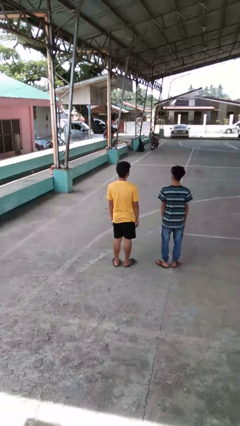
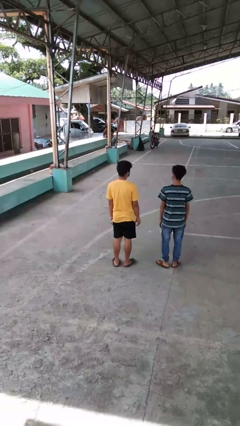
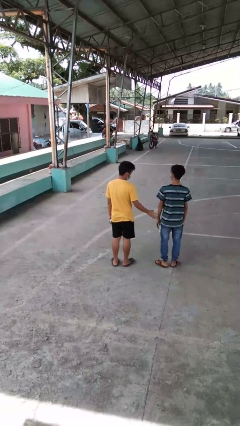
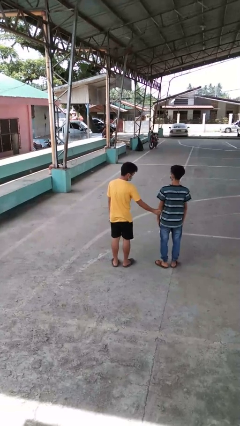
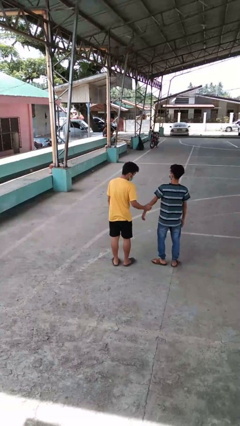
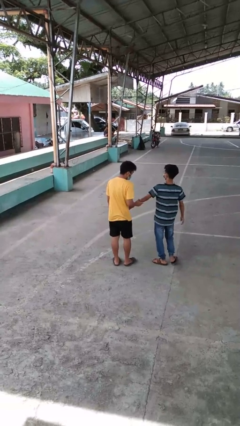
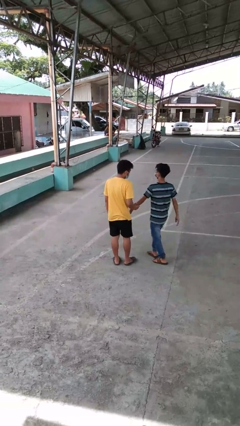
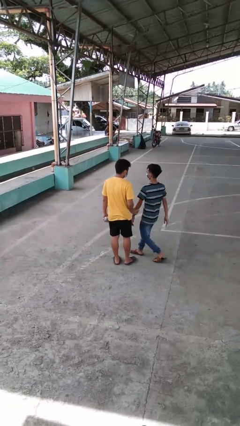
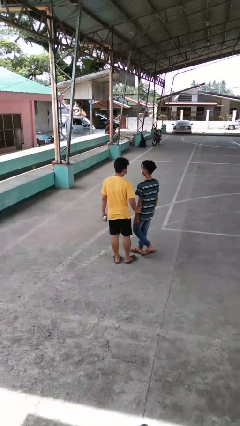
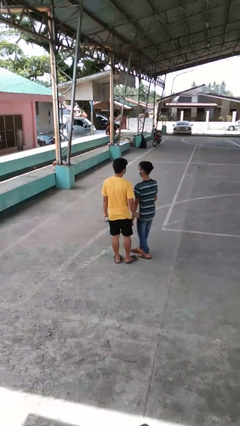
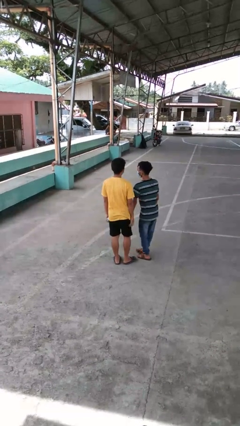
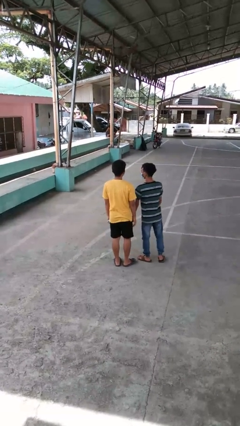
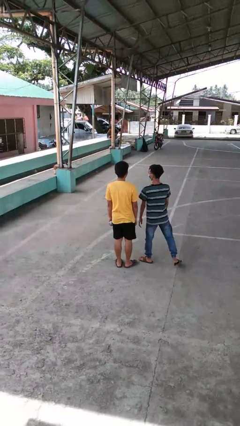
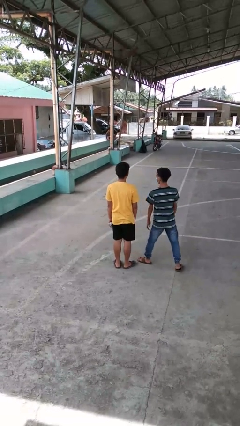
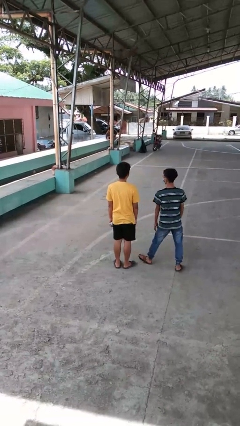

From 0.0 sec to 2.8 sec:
person grabs person by forearm

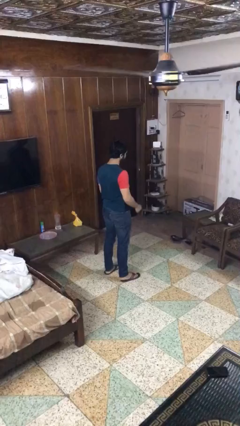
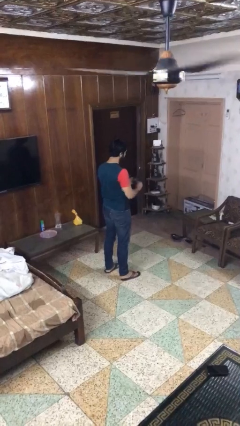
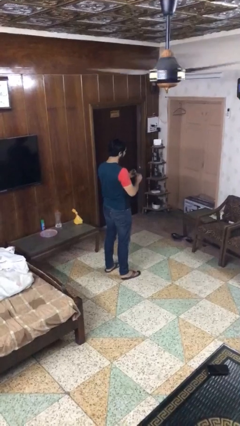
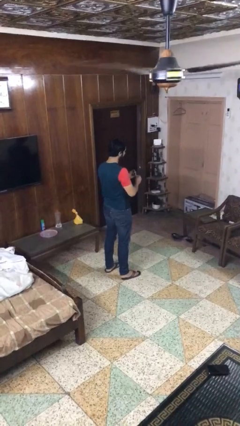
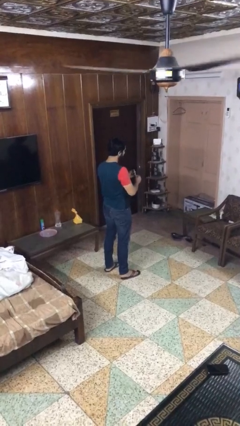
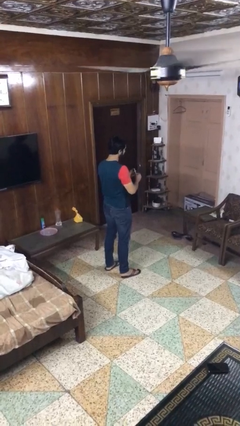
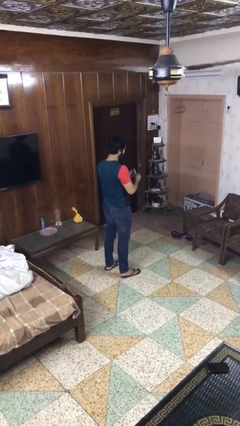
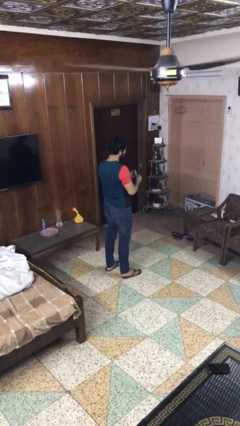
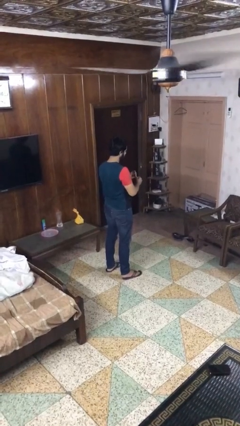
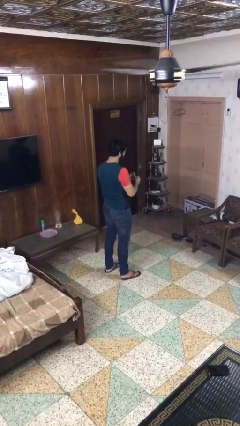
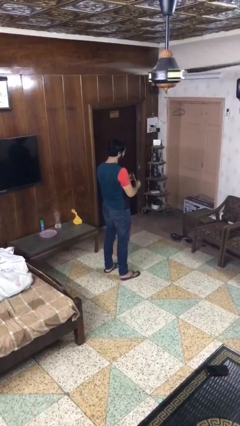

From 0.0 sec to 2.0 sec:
person files fingernails

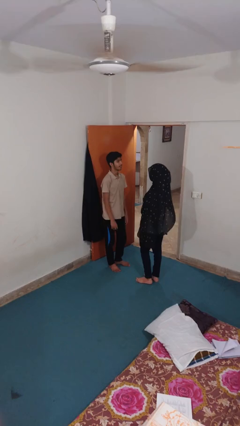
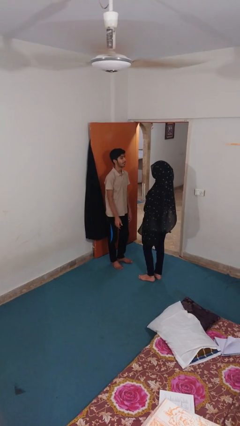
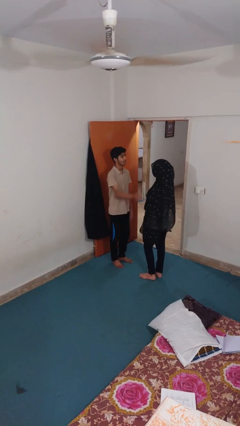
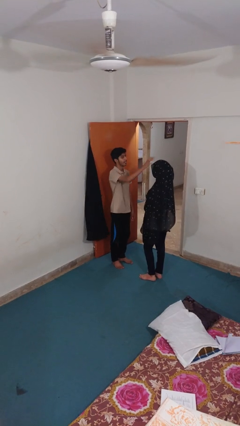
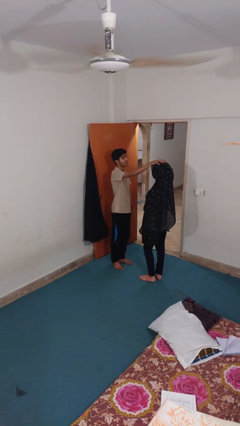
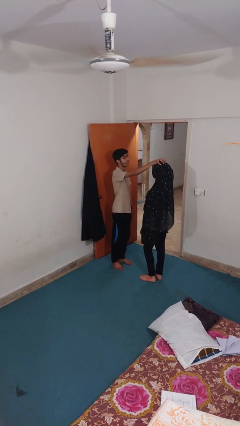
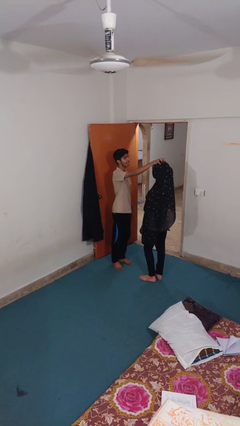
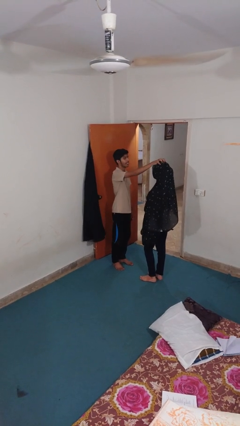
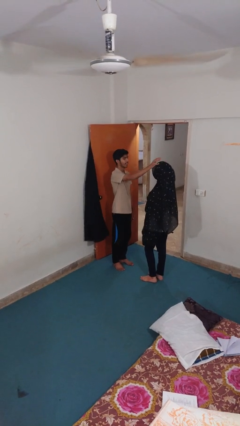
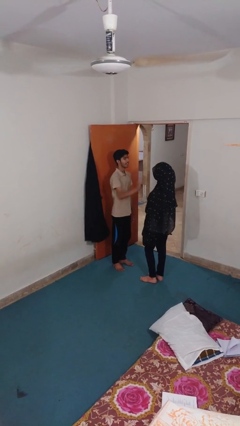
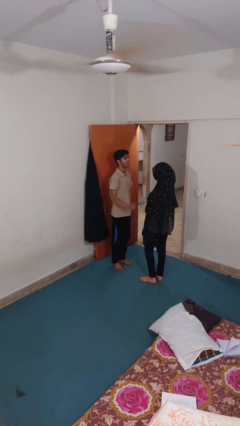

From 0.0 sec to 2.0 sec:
person grabs person by hair

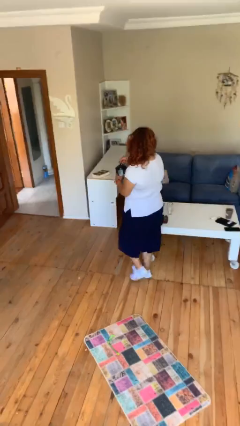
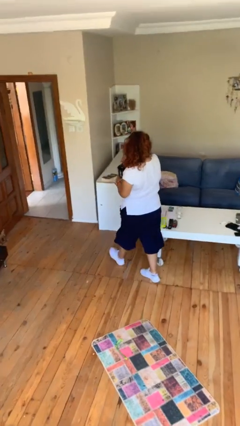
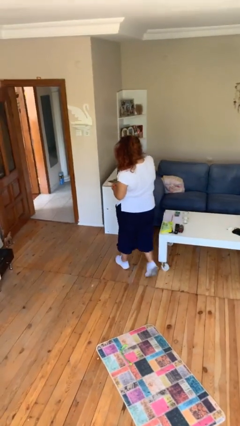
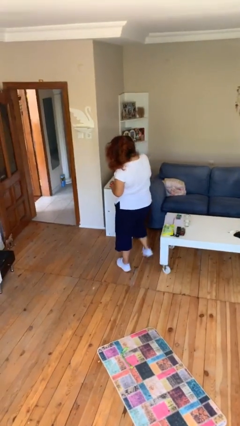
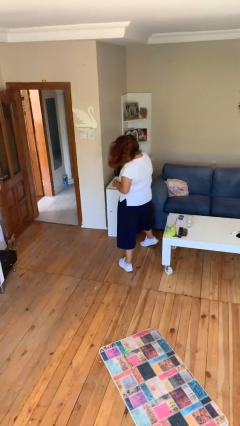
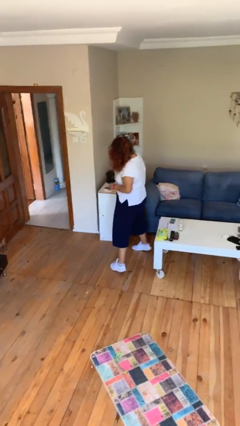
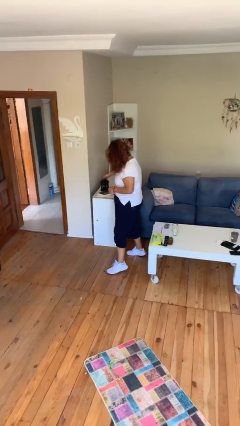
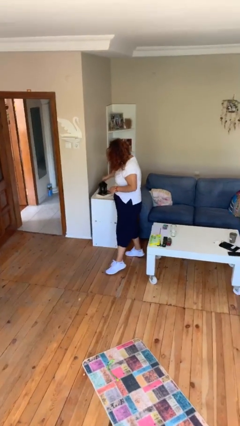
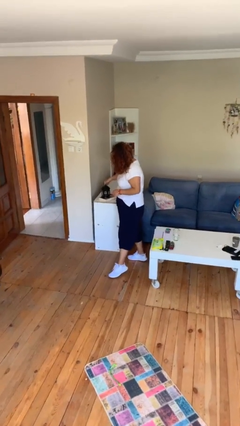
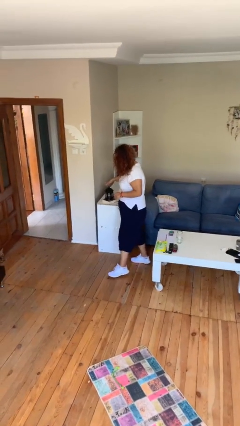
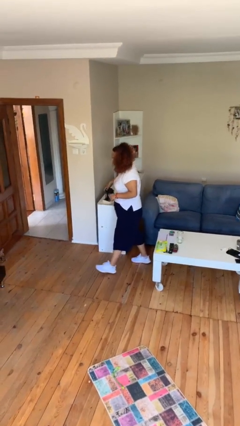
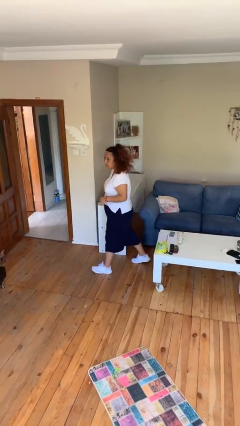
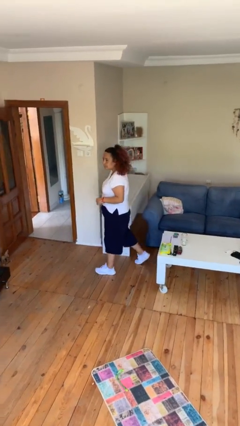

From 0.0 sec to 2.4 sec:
person puts down object on table

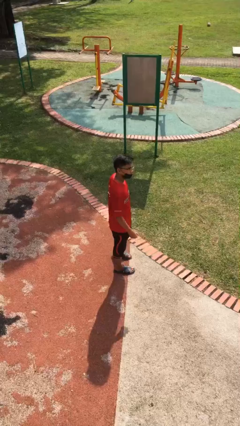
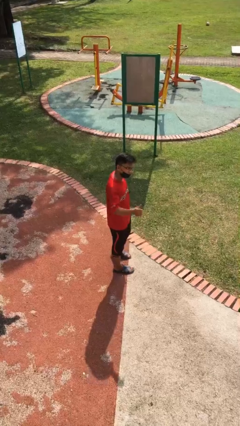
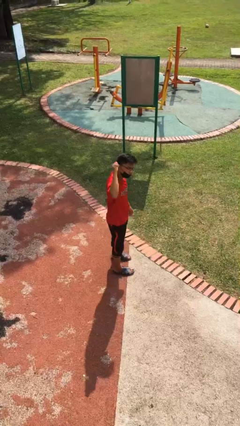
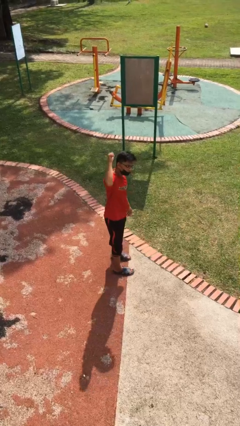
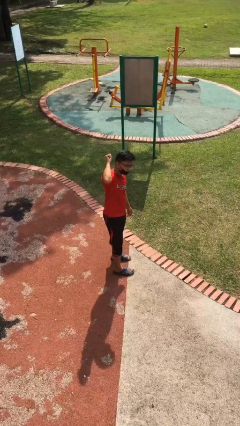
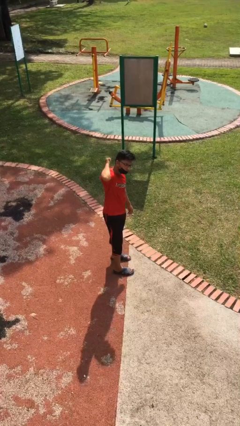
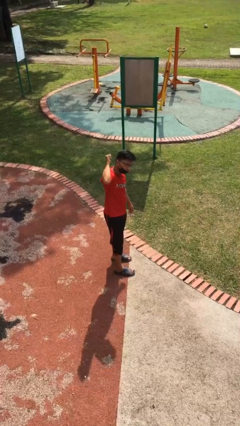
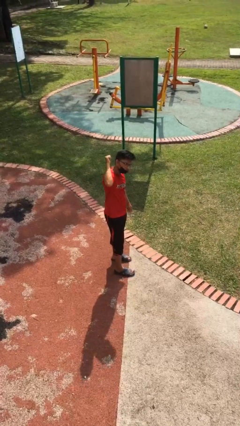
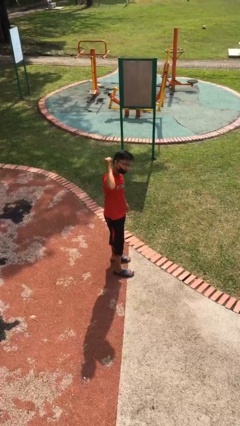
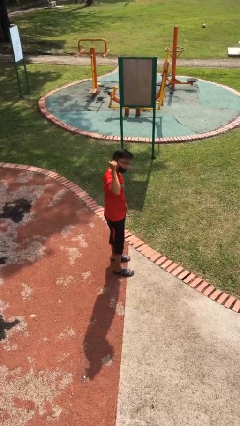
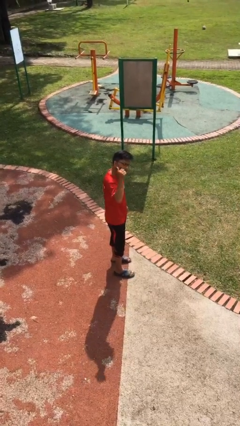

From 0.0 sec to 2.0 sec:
person gestures behind me

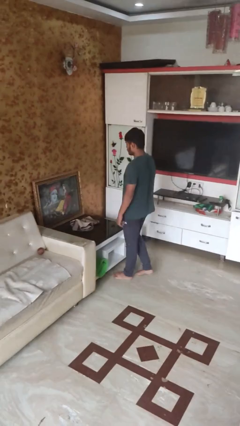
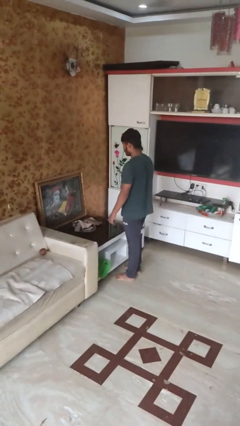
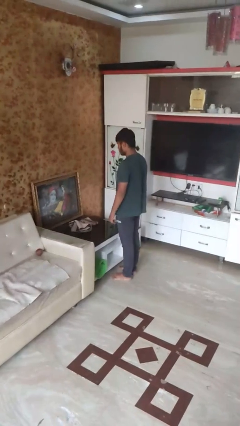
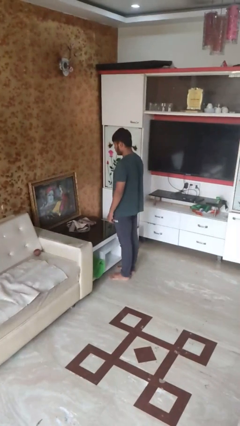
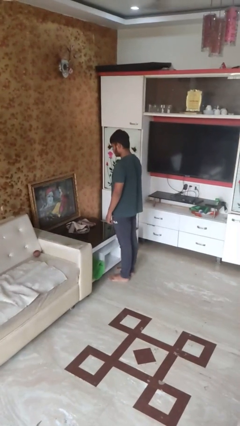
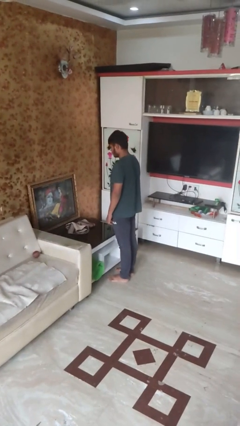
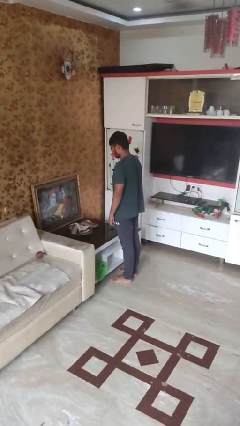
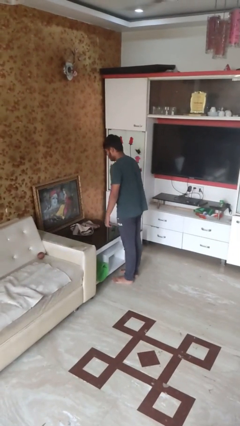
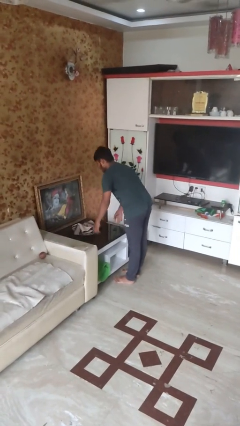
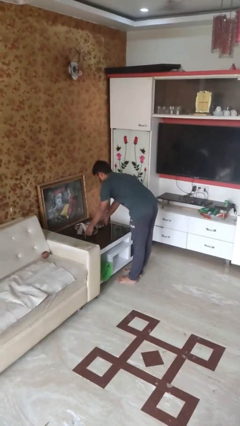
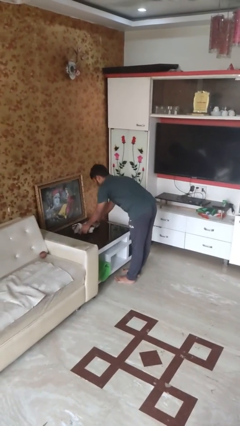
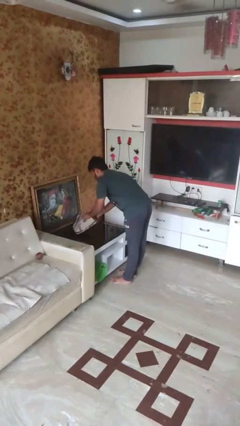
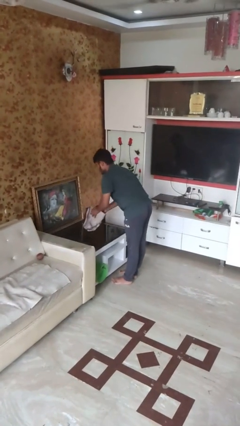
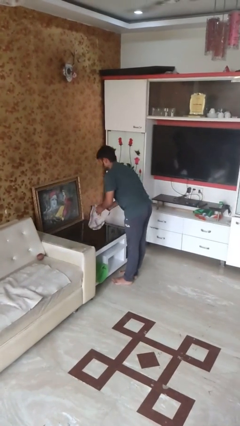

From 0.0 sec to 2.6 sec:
person picks up object from table

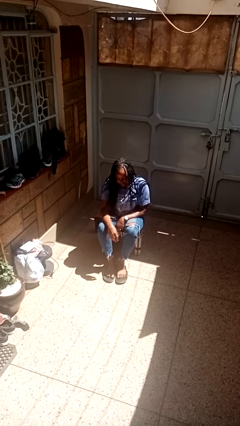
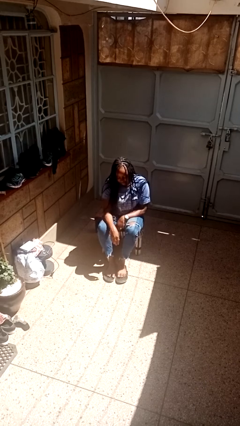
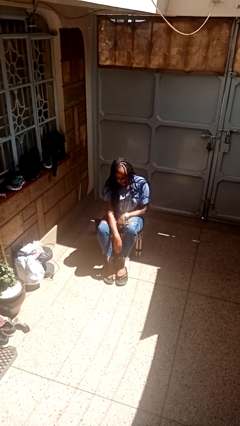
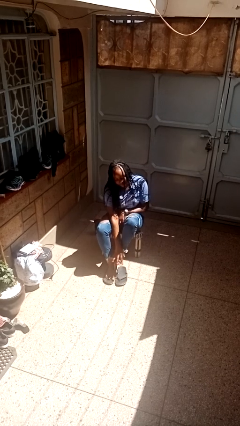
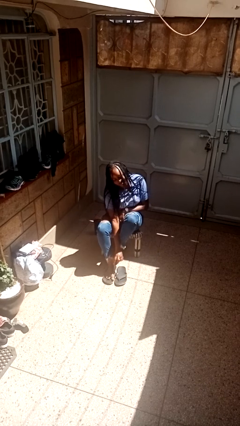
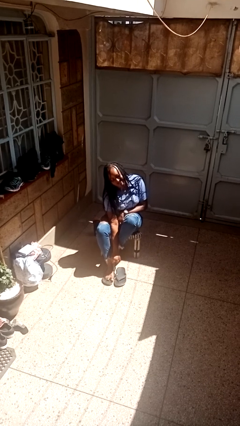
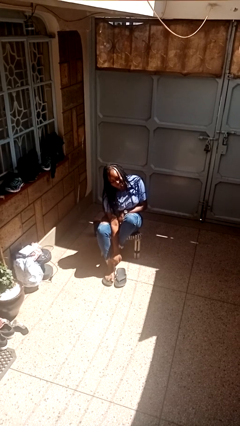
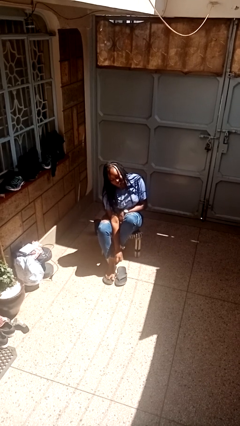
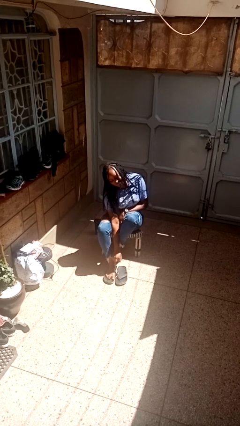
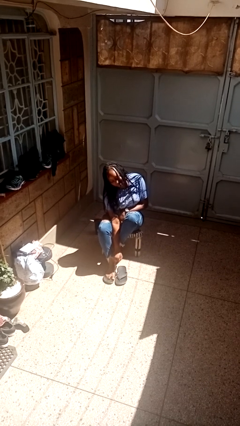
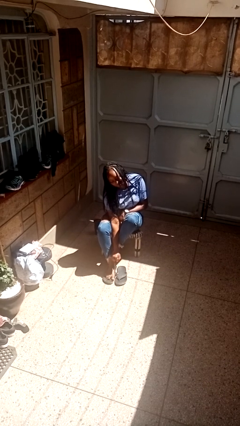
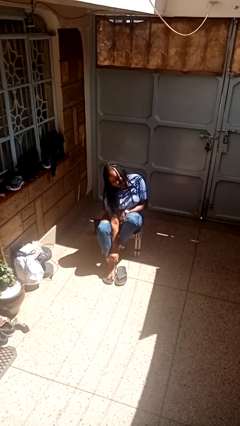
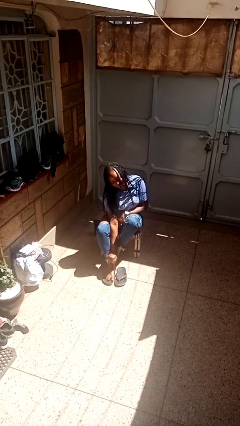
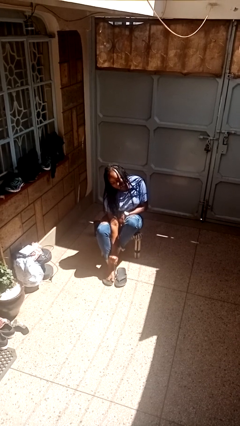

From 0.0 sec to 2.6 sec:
person rubs foot

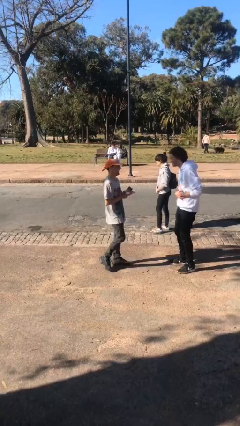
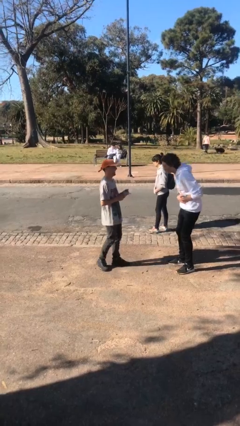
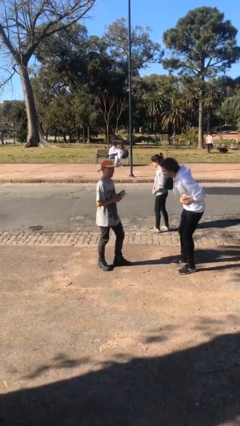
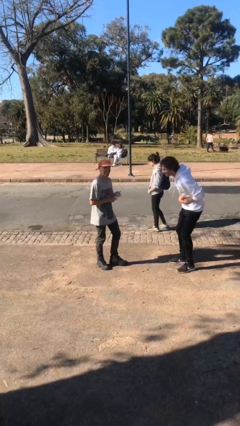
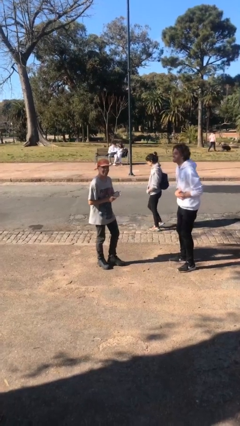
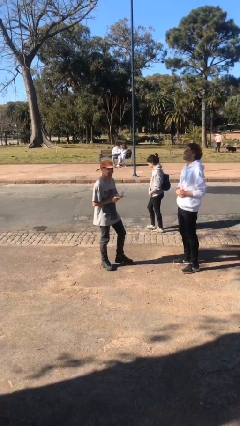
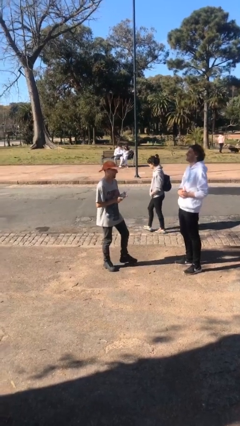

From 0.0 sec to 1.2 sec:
person laughs with person
